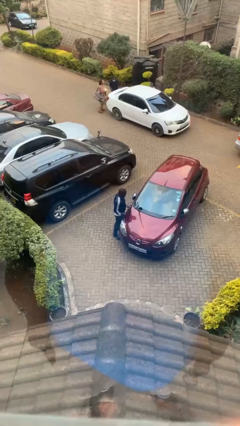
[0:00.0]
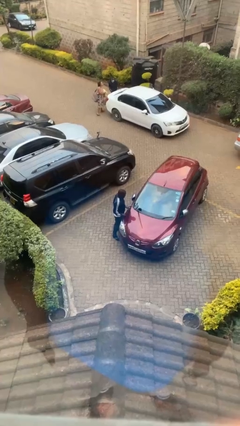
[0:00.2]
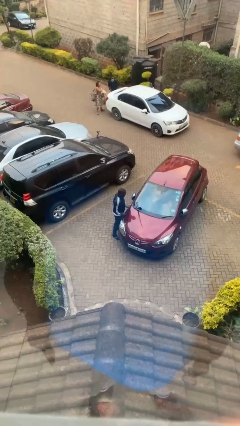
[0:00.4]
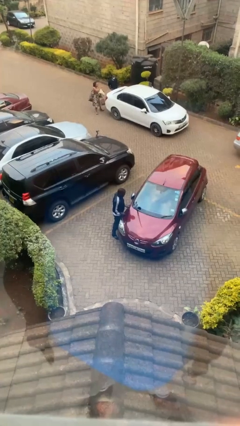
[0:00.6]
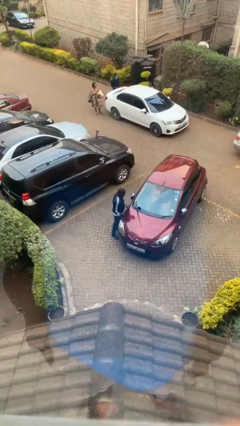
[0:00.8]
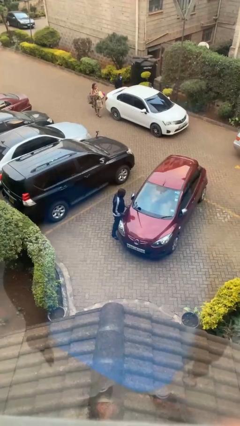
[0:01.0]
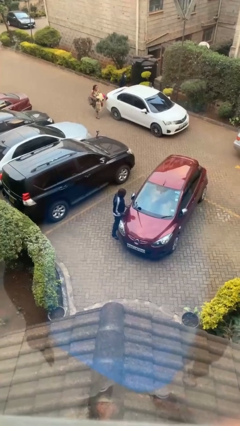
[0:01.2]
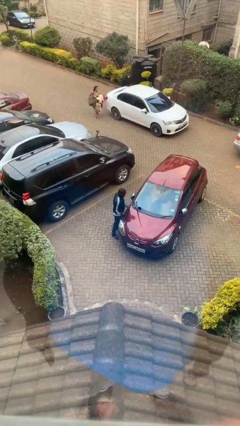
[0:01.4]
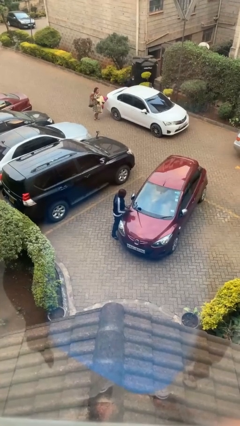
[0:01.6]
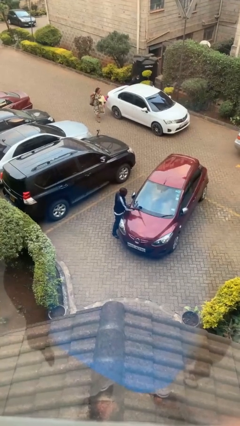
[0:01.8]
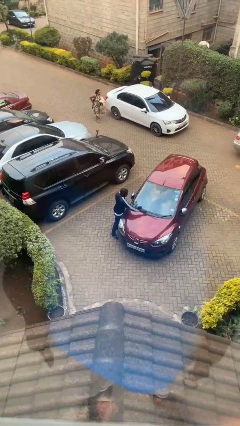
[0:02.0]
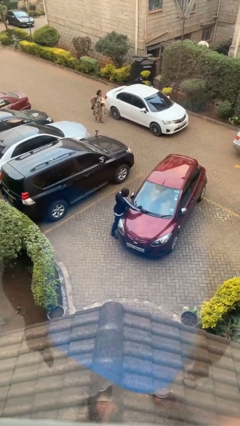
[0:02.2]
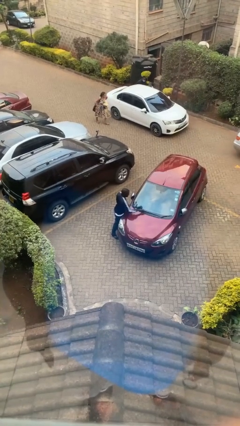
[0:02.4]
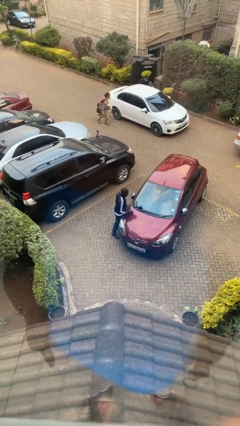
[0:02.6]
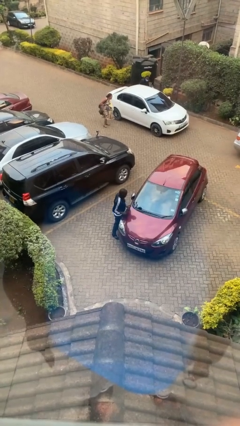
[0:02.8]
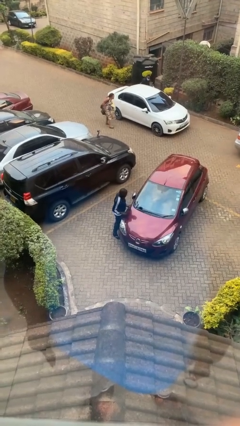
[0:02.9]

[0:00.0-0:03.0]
person flips down car wipers

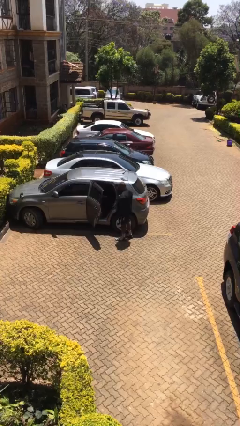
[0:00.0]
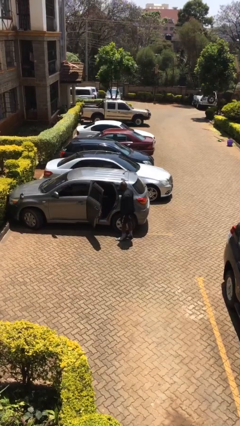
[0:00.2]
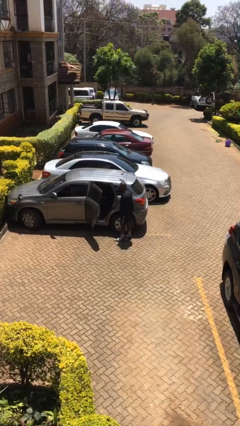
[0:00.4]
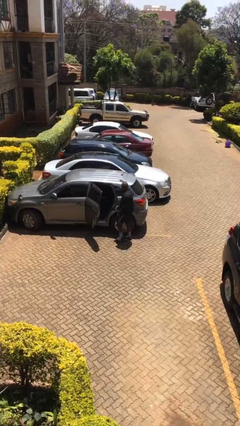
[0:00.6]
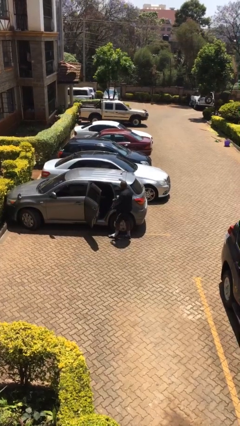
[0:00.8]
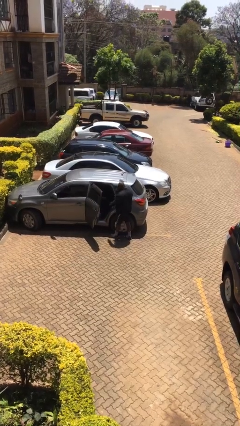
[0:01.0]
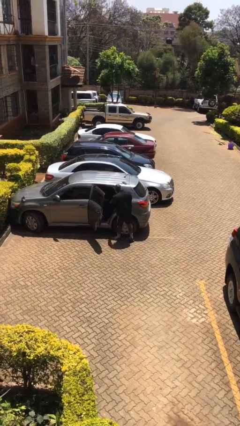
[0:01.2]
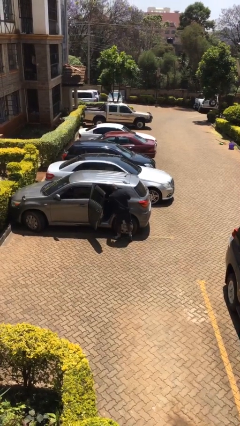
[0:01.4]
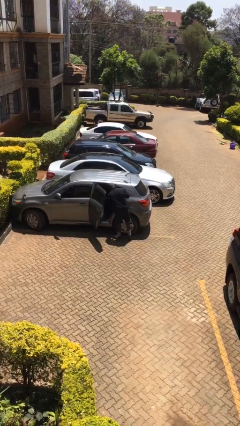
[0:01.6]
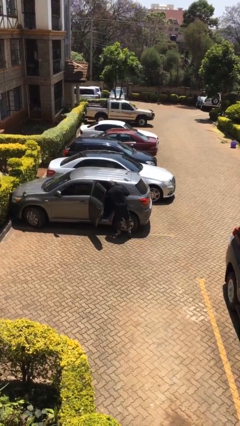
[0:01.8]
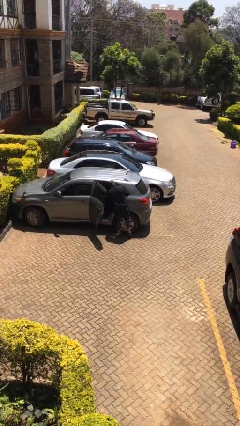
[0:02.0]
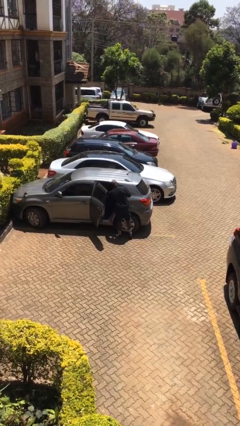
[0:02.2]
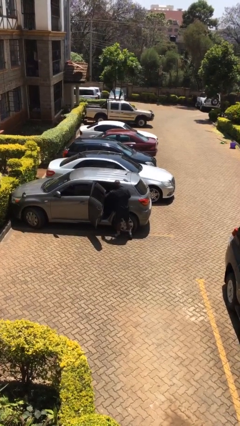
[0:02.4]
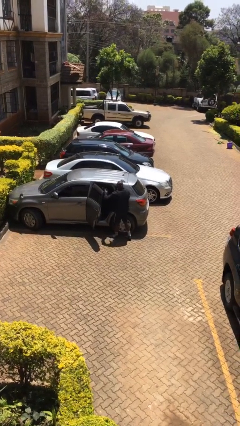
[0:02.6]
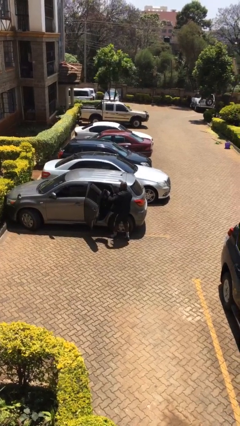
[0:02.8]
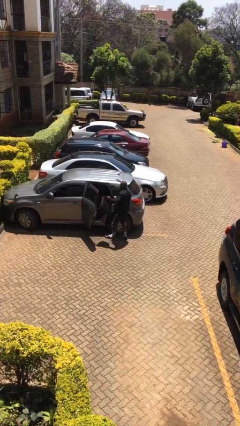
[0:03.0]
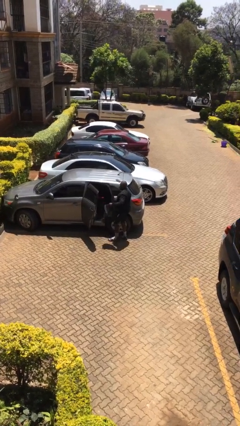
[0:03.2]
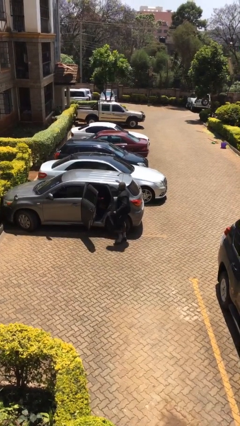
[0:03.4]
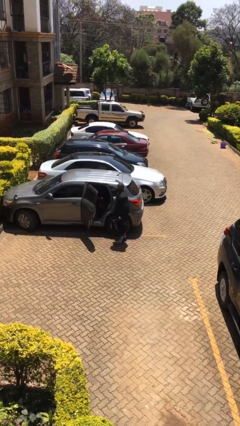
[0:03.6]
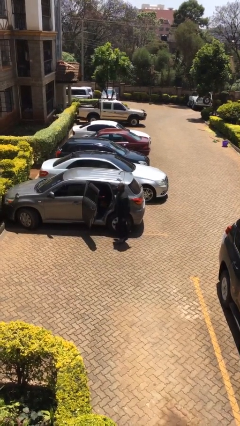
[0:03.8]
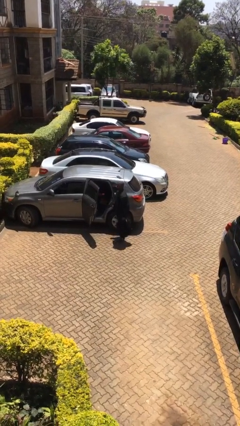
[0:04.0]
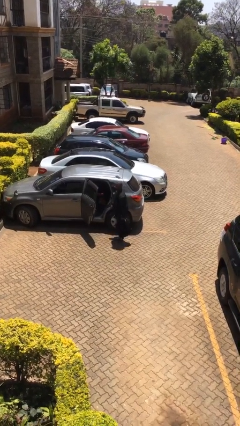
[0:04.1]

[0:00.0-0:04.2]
person unloads car

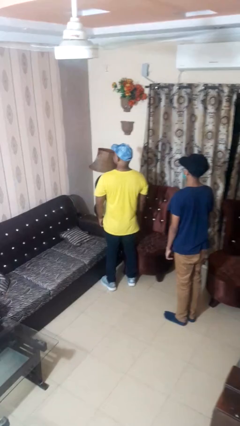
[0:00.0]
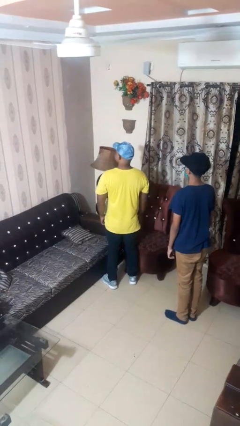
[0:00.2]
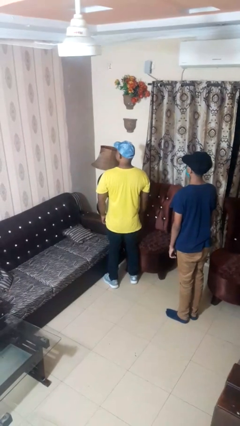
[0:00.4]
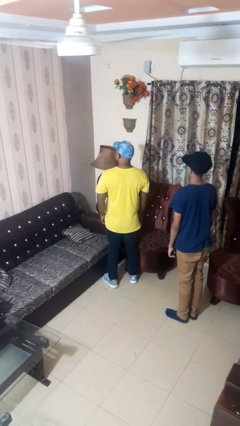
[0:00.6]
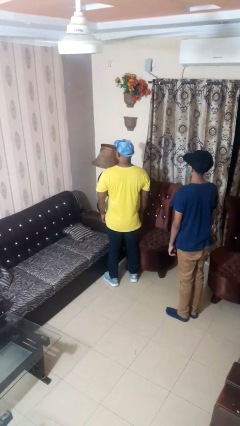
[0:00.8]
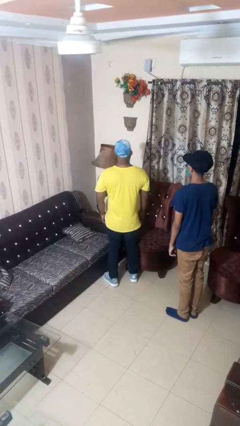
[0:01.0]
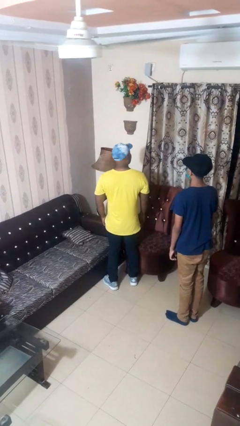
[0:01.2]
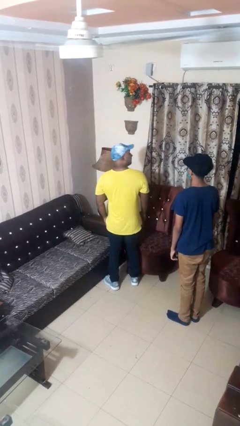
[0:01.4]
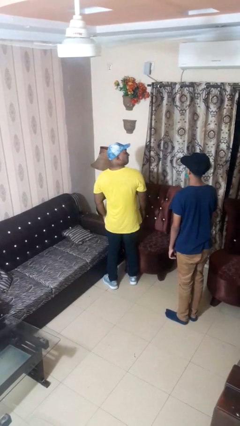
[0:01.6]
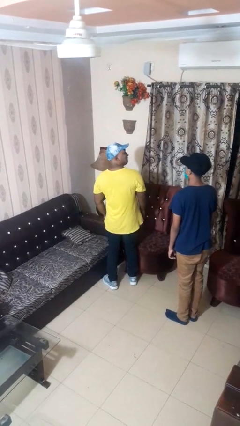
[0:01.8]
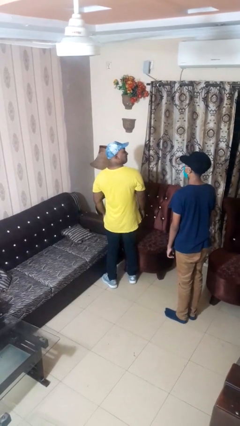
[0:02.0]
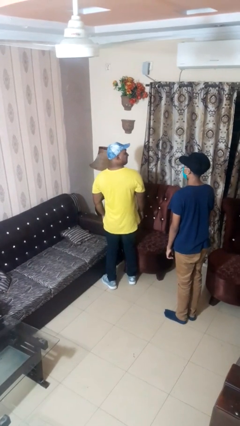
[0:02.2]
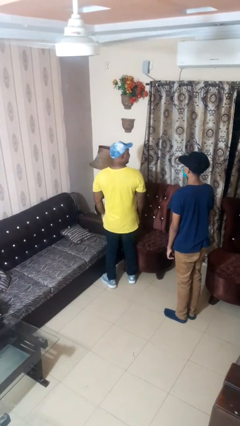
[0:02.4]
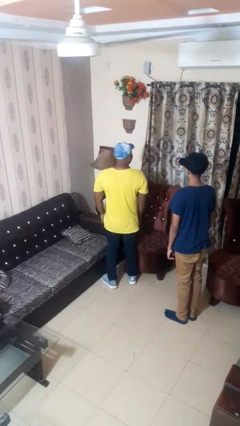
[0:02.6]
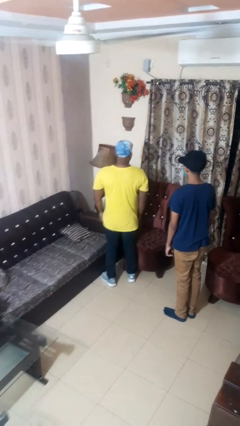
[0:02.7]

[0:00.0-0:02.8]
person looks over shoulder

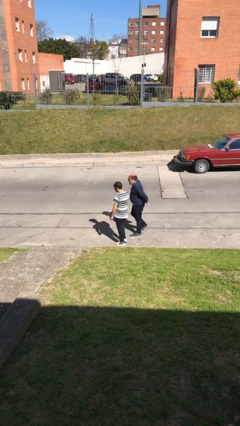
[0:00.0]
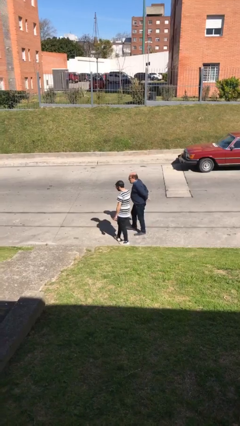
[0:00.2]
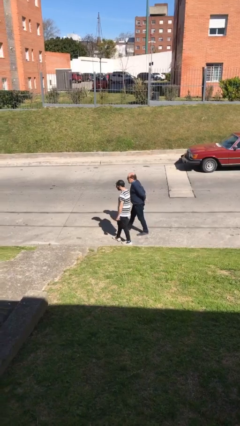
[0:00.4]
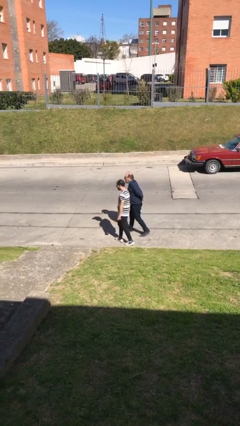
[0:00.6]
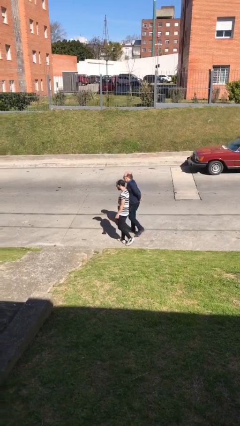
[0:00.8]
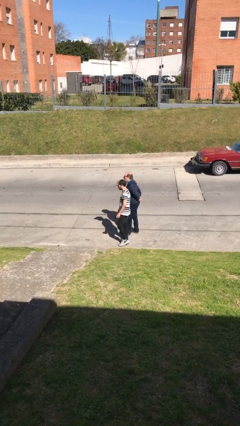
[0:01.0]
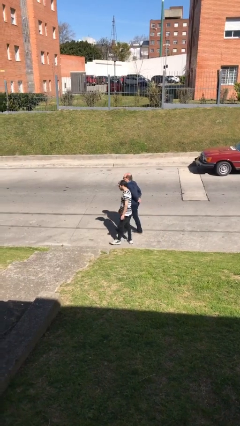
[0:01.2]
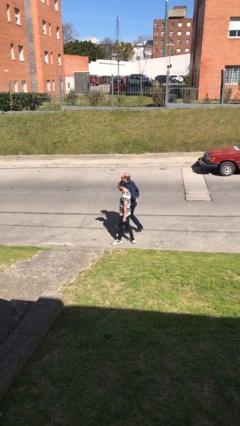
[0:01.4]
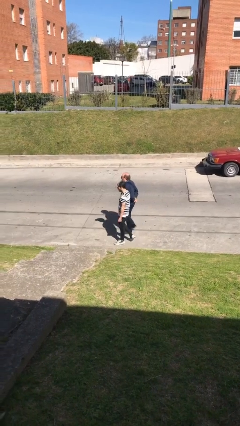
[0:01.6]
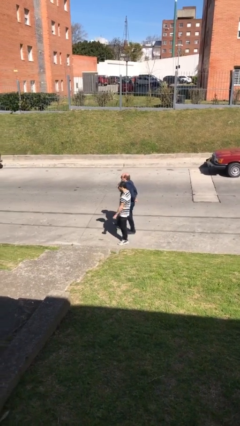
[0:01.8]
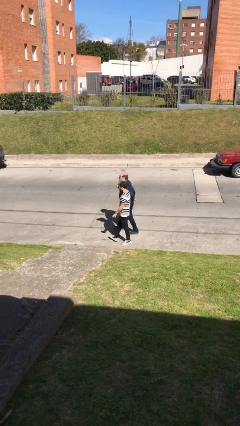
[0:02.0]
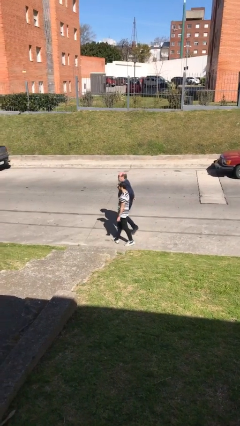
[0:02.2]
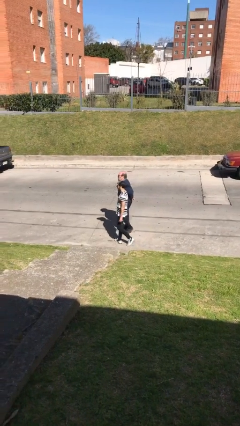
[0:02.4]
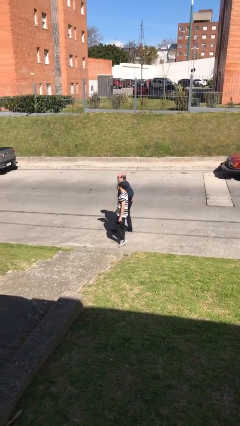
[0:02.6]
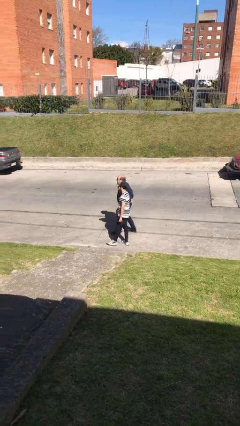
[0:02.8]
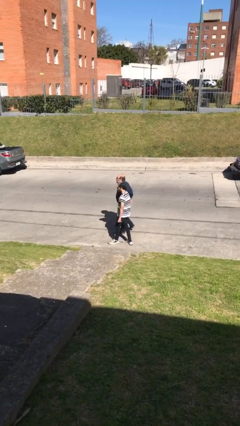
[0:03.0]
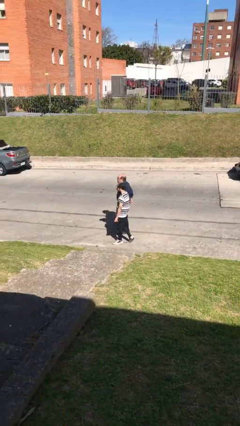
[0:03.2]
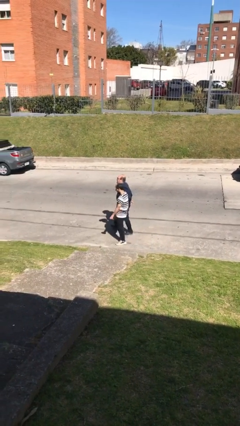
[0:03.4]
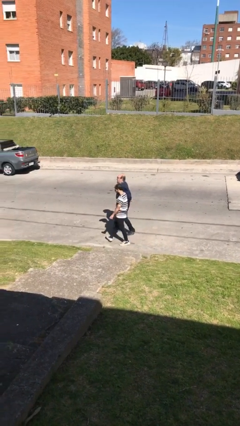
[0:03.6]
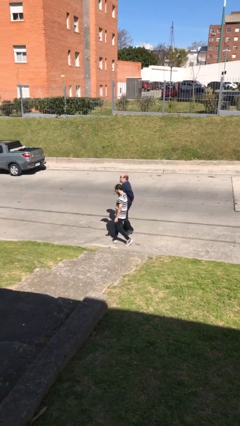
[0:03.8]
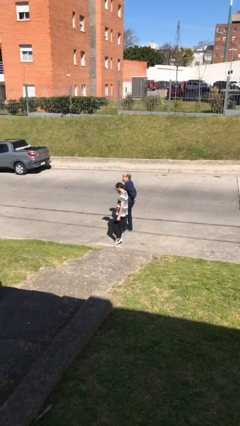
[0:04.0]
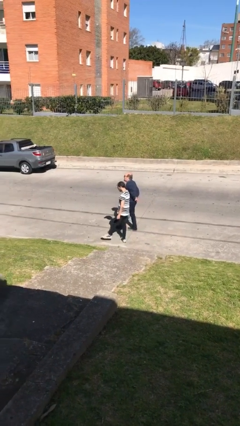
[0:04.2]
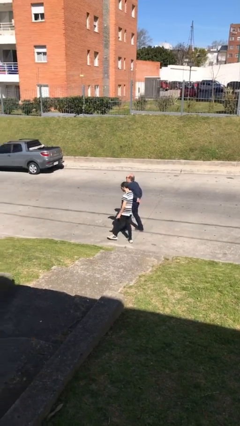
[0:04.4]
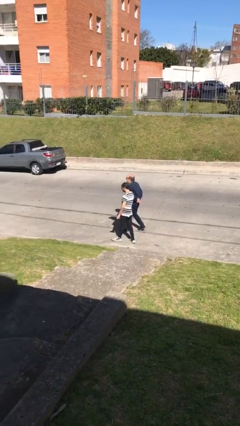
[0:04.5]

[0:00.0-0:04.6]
person talks to person

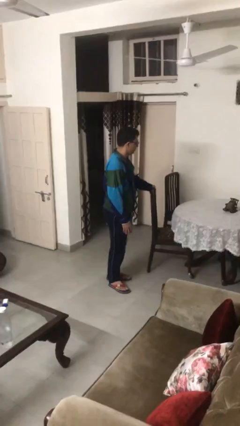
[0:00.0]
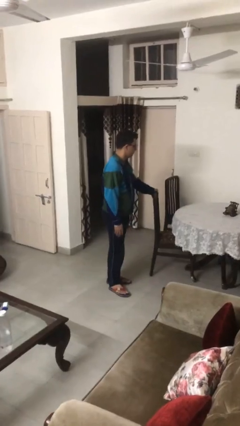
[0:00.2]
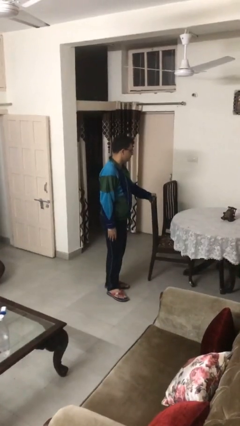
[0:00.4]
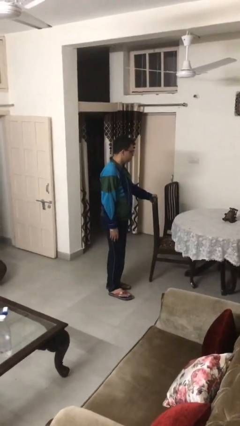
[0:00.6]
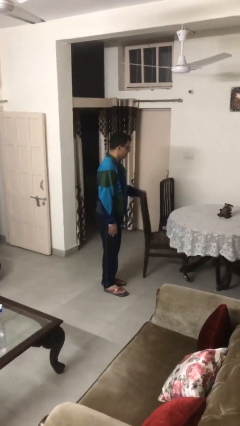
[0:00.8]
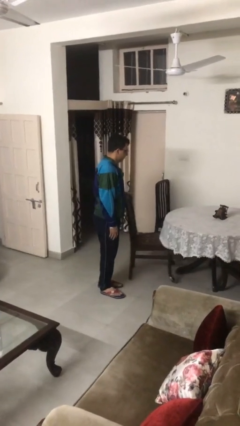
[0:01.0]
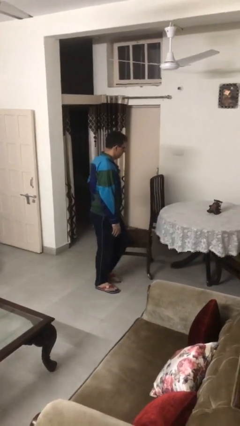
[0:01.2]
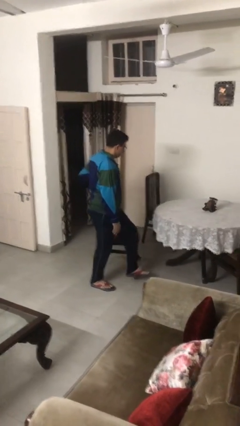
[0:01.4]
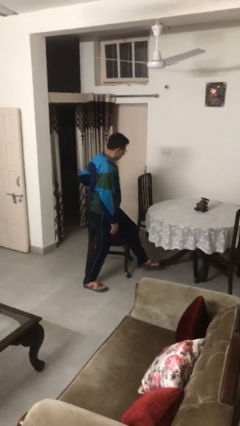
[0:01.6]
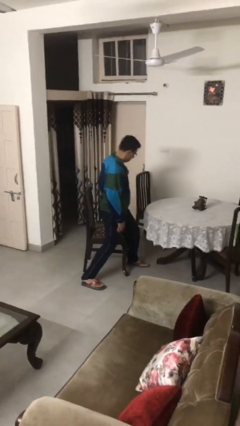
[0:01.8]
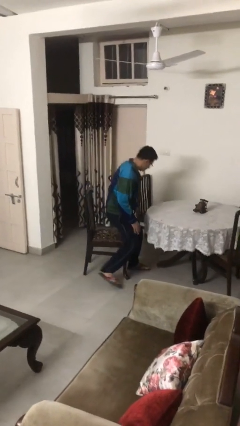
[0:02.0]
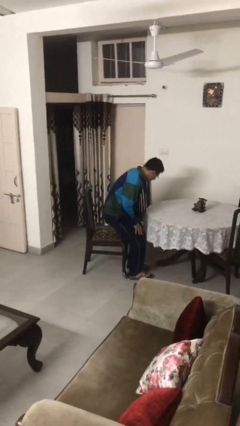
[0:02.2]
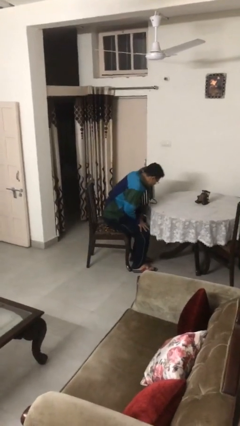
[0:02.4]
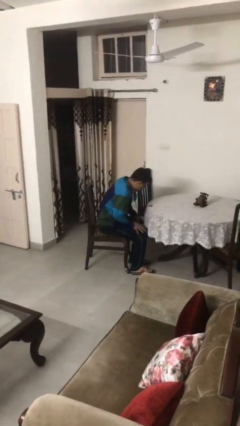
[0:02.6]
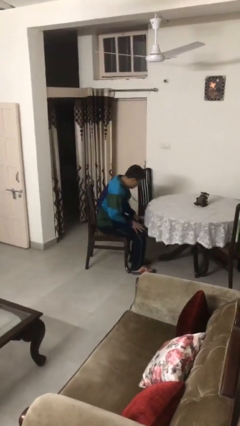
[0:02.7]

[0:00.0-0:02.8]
person sits down

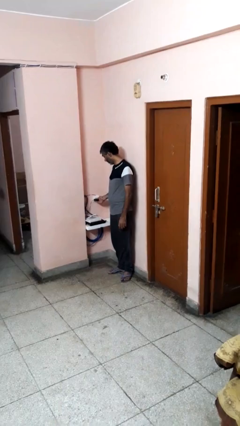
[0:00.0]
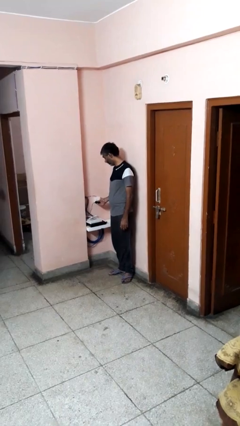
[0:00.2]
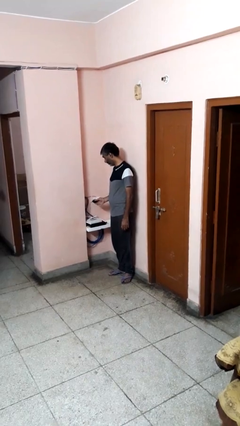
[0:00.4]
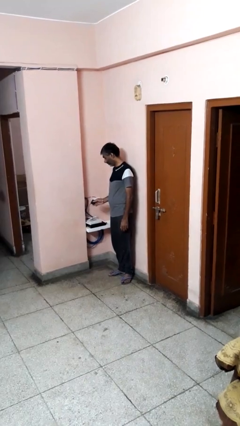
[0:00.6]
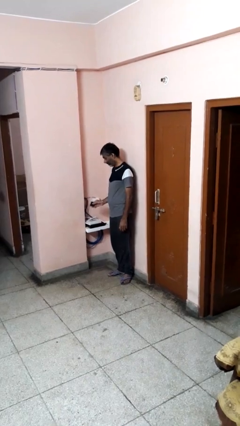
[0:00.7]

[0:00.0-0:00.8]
person unplugs from electrical socket
